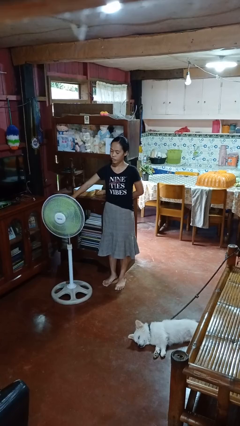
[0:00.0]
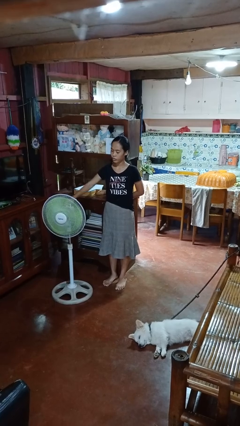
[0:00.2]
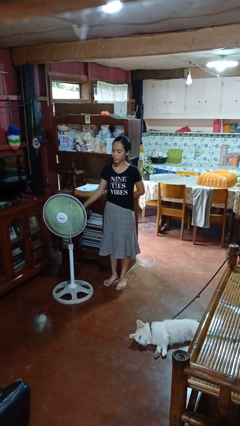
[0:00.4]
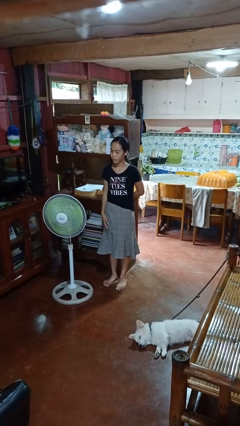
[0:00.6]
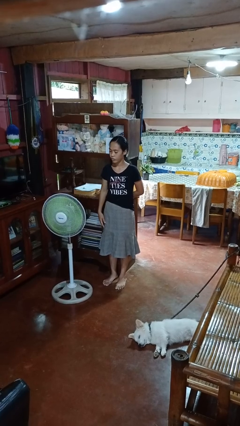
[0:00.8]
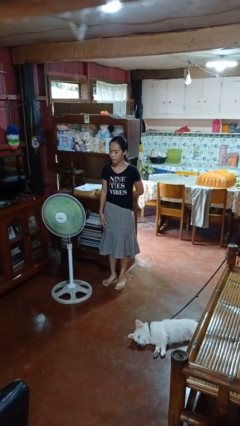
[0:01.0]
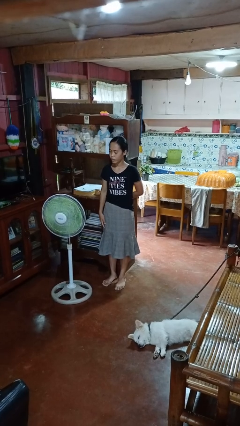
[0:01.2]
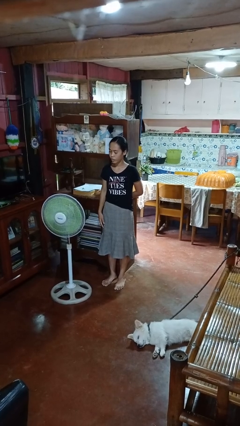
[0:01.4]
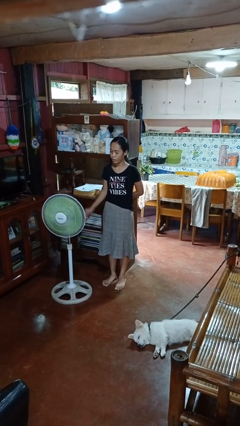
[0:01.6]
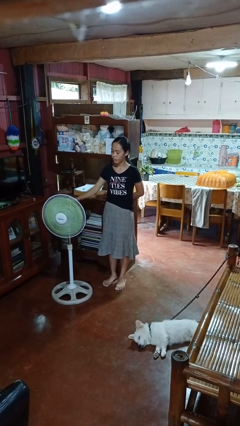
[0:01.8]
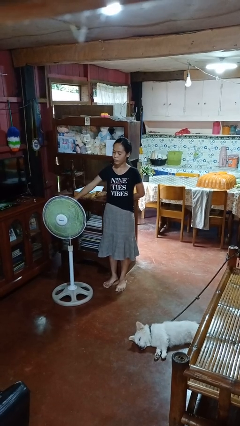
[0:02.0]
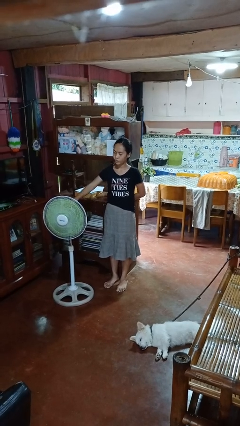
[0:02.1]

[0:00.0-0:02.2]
person turns on fan

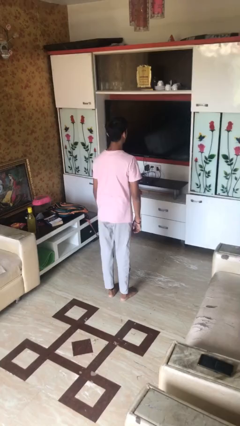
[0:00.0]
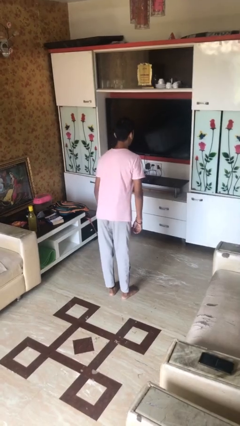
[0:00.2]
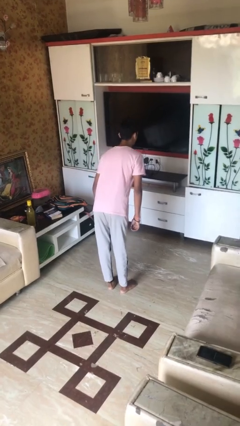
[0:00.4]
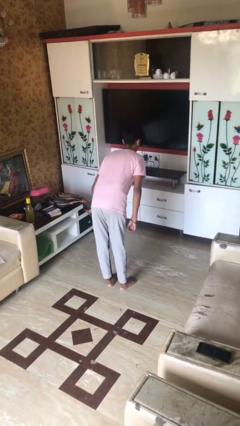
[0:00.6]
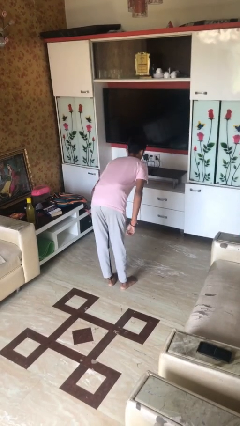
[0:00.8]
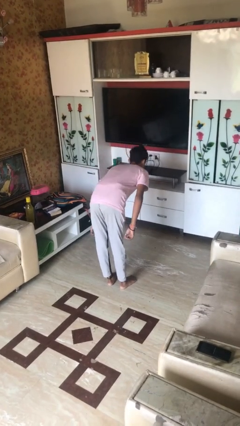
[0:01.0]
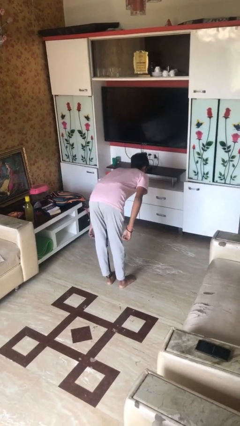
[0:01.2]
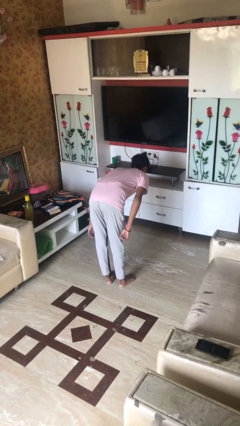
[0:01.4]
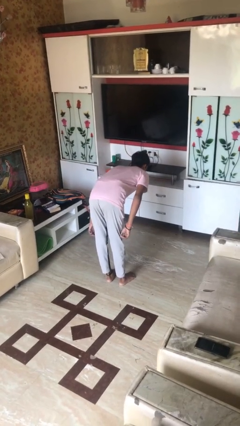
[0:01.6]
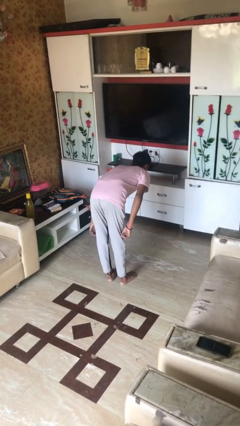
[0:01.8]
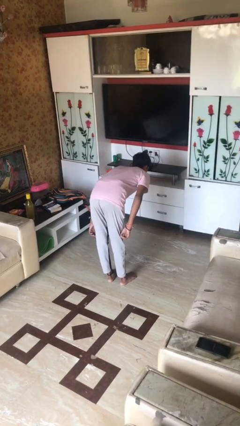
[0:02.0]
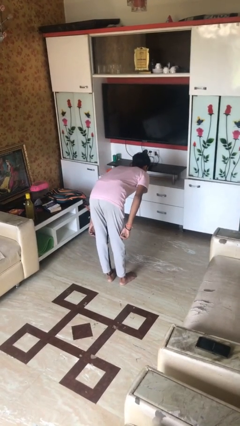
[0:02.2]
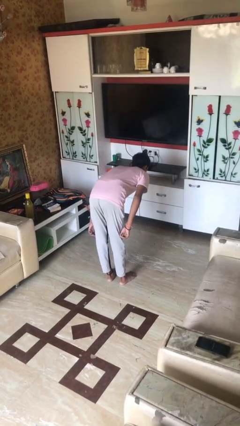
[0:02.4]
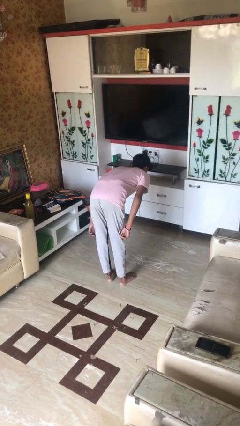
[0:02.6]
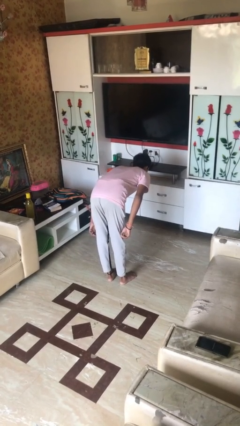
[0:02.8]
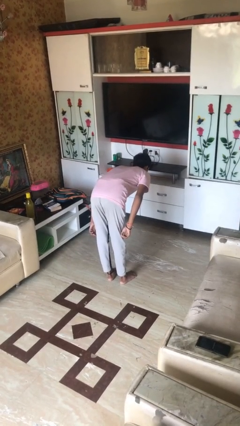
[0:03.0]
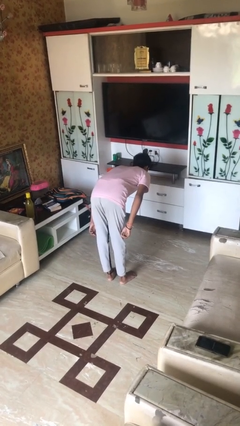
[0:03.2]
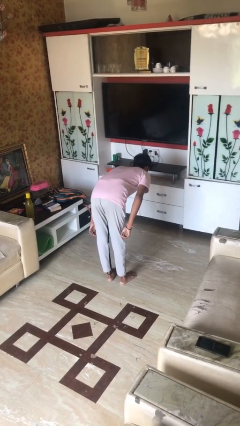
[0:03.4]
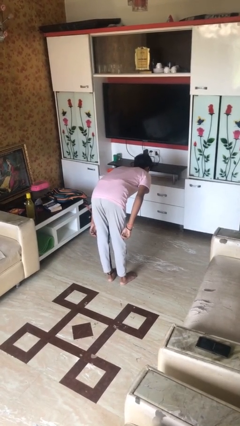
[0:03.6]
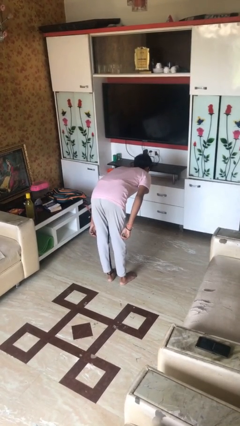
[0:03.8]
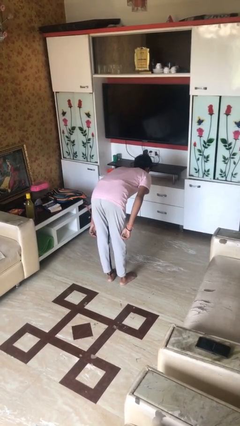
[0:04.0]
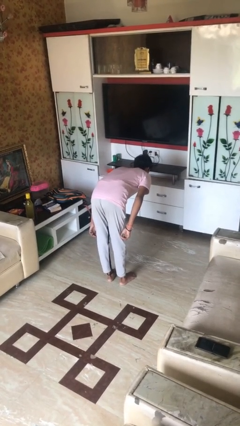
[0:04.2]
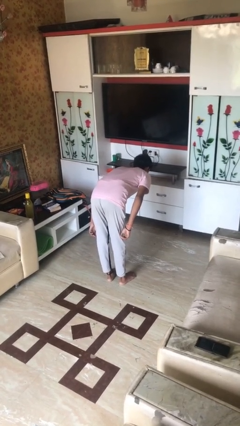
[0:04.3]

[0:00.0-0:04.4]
person bows

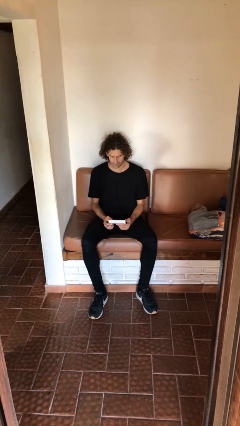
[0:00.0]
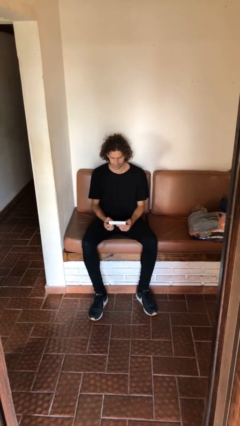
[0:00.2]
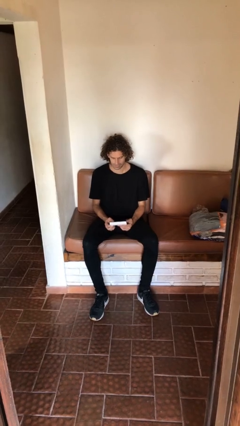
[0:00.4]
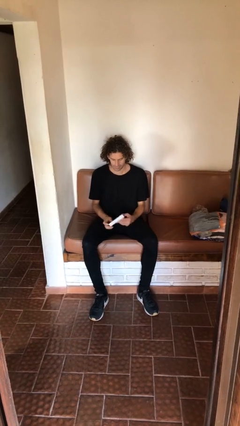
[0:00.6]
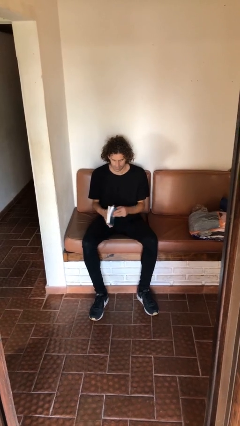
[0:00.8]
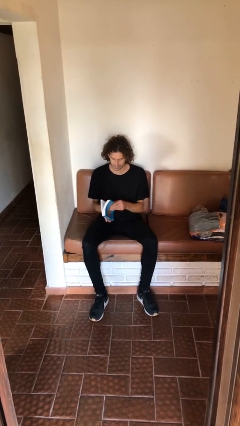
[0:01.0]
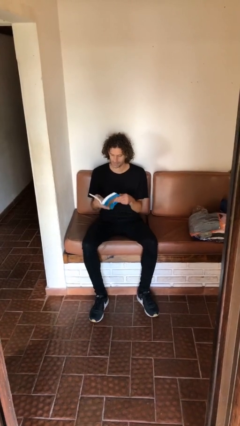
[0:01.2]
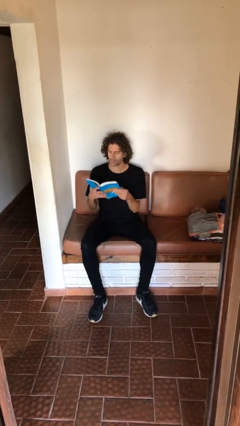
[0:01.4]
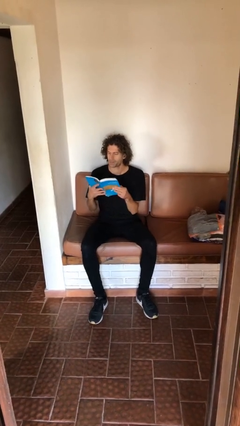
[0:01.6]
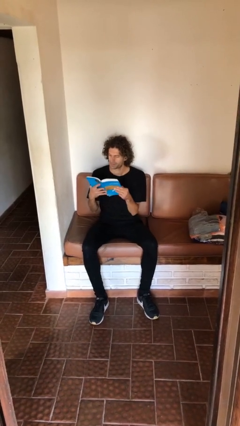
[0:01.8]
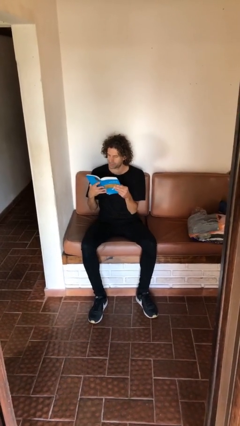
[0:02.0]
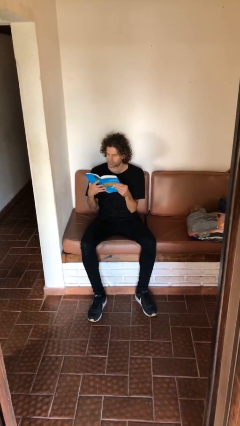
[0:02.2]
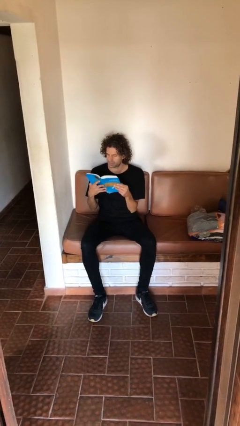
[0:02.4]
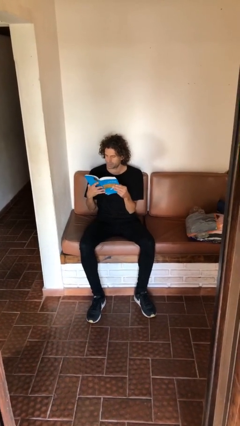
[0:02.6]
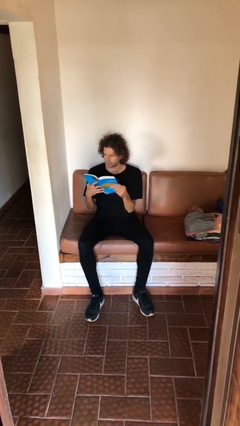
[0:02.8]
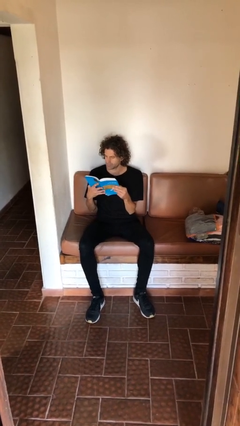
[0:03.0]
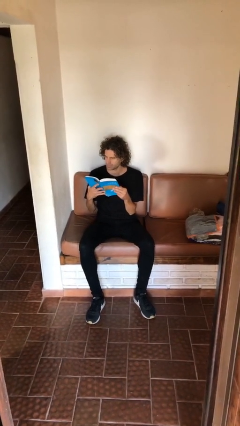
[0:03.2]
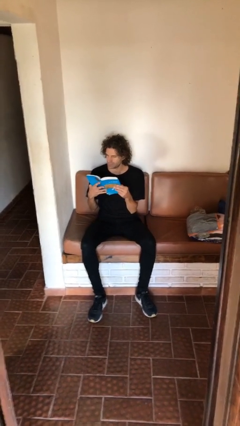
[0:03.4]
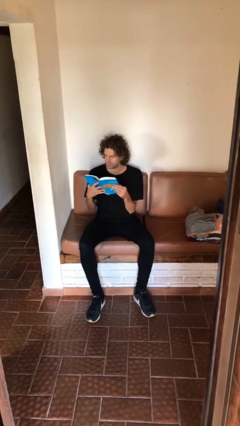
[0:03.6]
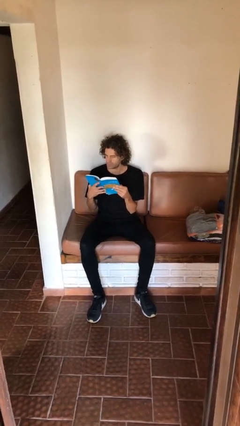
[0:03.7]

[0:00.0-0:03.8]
person reads document

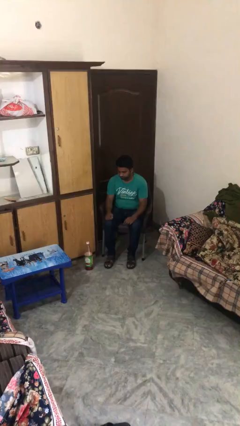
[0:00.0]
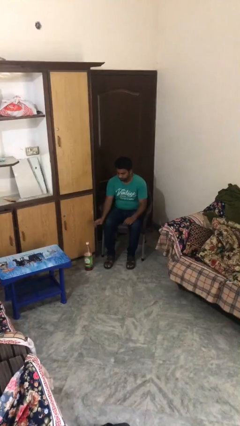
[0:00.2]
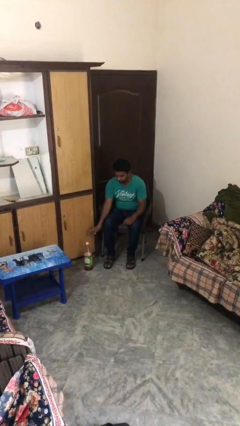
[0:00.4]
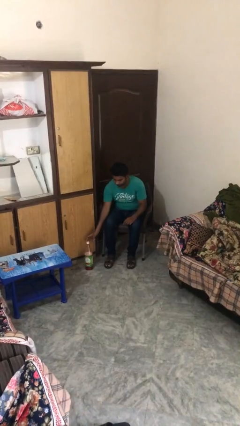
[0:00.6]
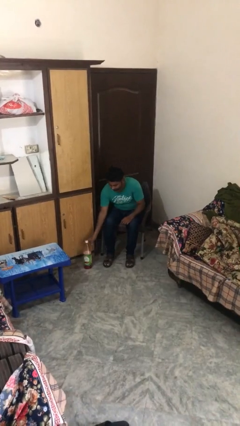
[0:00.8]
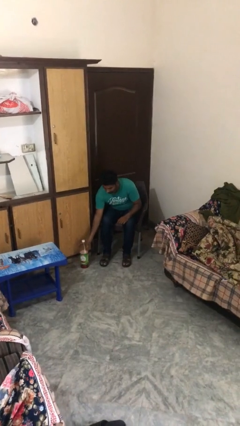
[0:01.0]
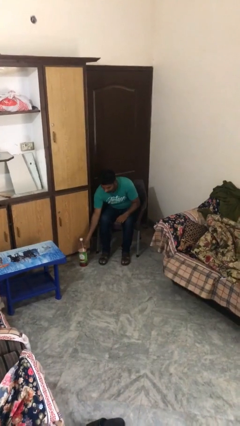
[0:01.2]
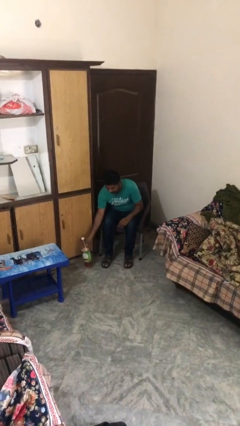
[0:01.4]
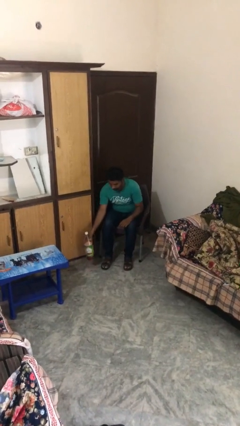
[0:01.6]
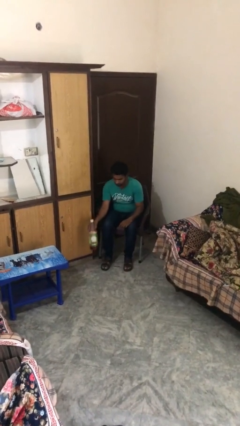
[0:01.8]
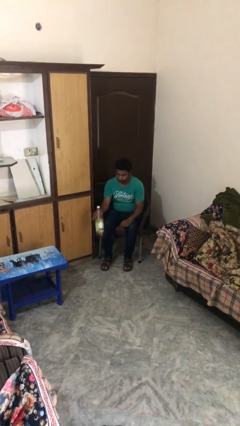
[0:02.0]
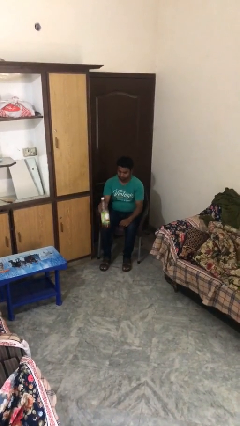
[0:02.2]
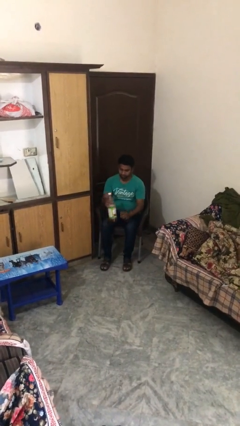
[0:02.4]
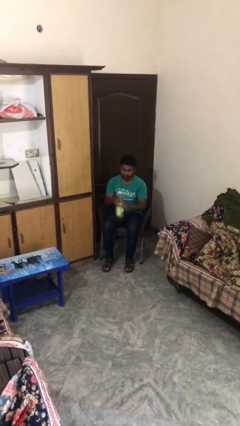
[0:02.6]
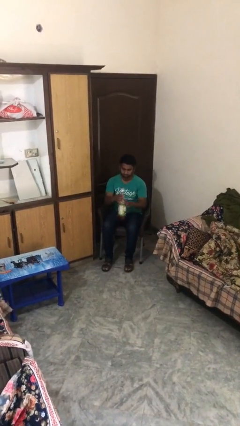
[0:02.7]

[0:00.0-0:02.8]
person picks up object from floor

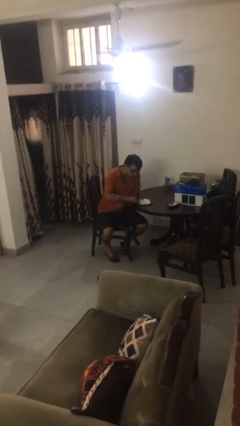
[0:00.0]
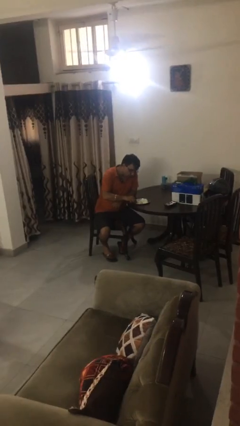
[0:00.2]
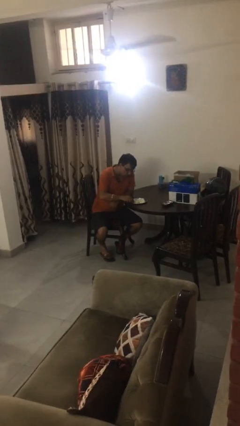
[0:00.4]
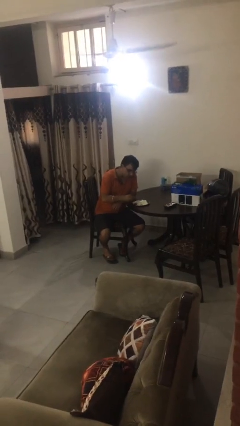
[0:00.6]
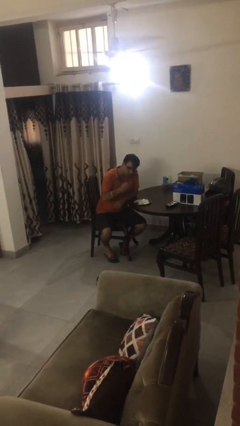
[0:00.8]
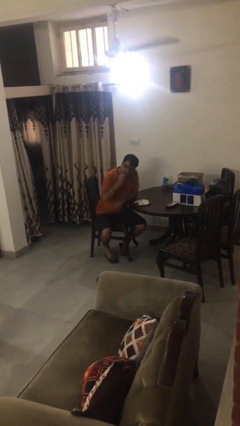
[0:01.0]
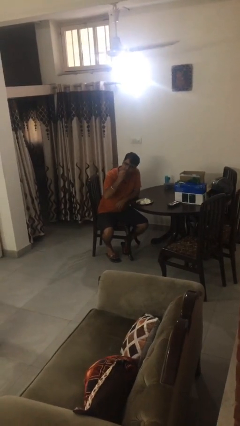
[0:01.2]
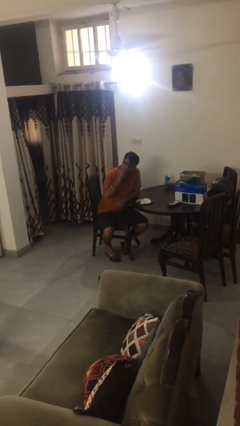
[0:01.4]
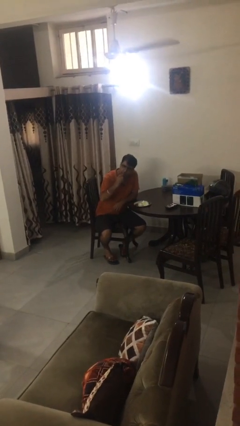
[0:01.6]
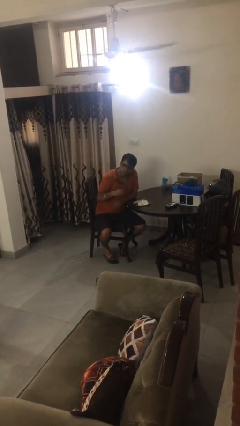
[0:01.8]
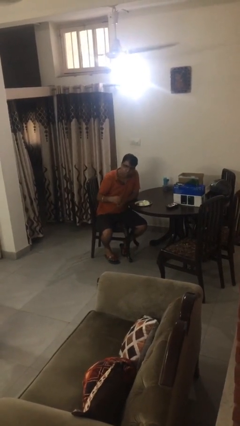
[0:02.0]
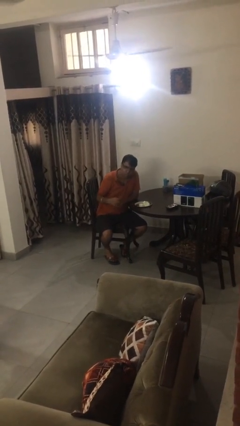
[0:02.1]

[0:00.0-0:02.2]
person eats with hands

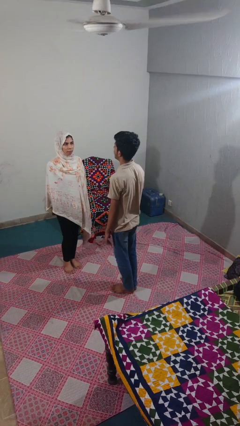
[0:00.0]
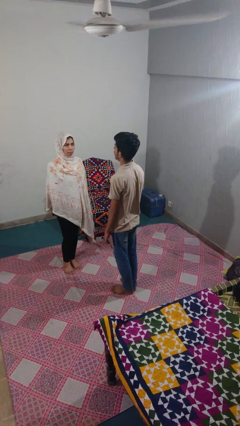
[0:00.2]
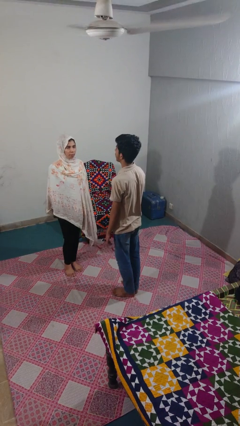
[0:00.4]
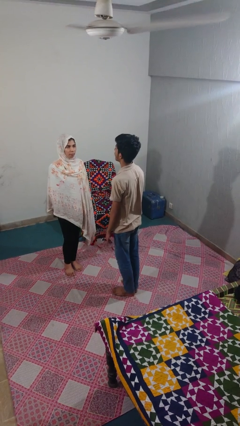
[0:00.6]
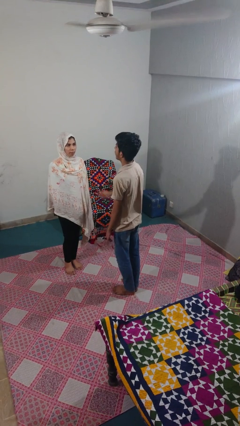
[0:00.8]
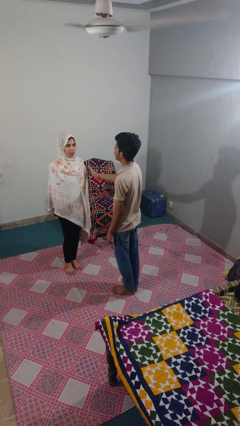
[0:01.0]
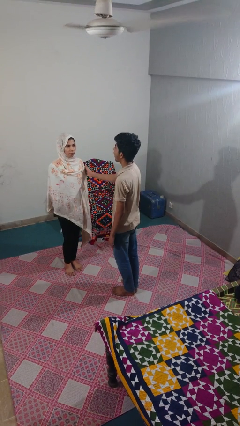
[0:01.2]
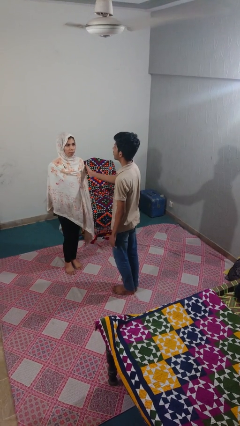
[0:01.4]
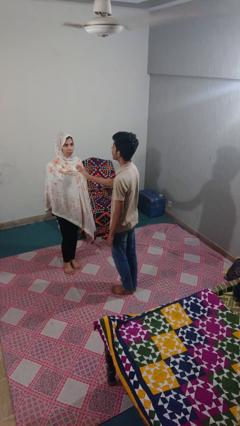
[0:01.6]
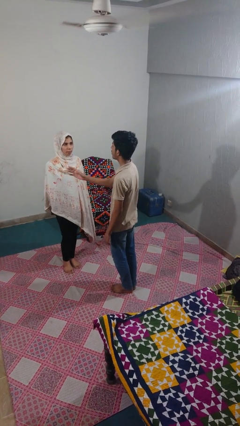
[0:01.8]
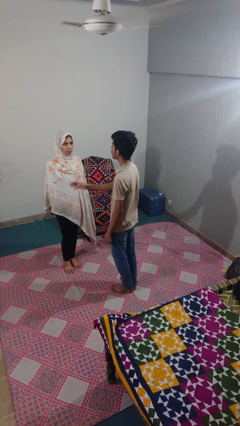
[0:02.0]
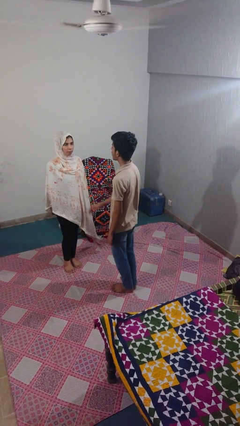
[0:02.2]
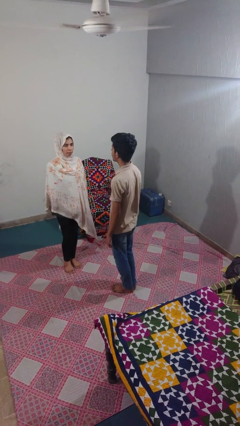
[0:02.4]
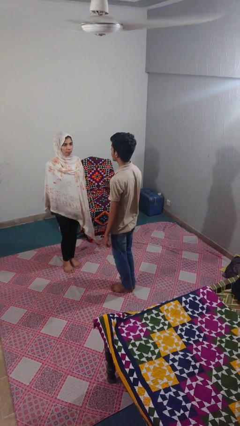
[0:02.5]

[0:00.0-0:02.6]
person shoves person
